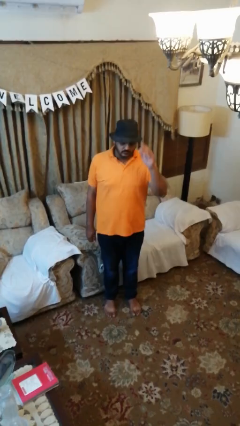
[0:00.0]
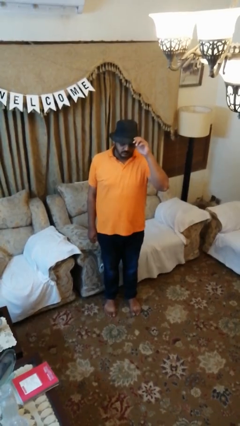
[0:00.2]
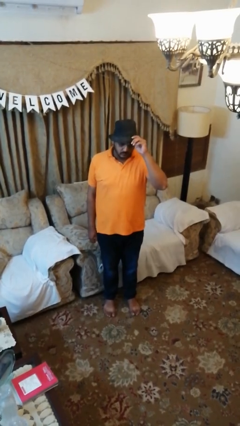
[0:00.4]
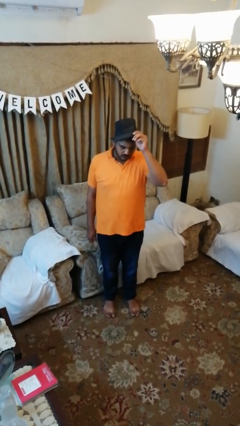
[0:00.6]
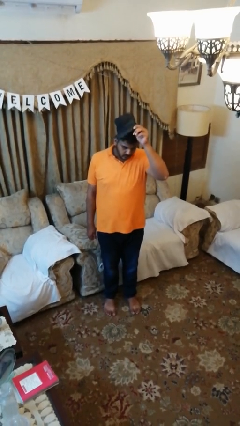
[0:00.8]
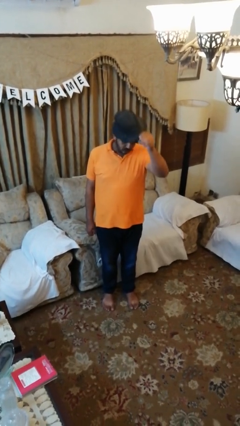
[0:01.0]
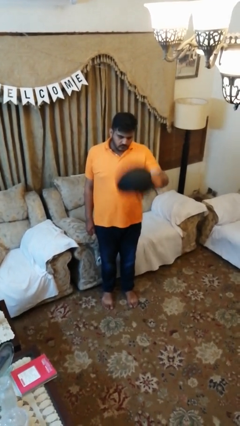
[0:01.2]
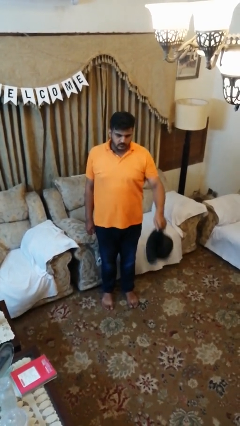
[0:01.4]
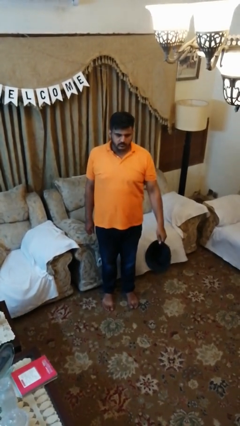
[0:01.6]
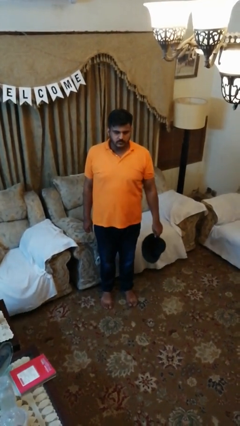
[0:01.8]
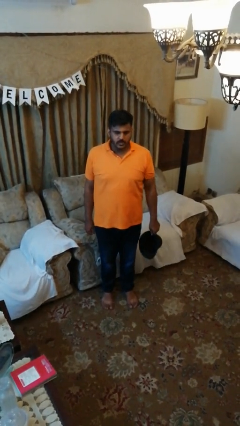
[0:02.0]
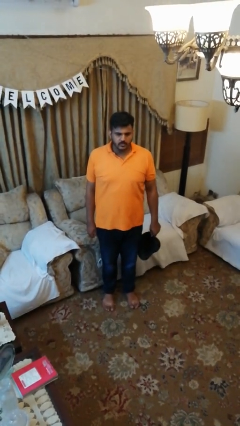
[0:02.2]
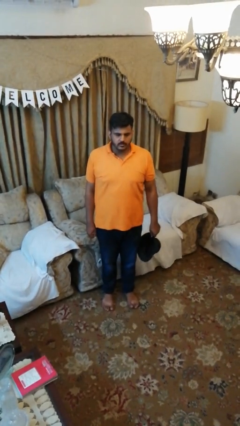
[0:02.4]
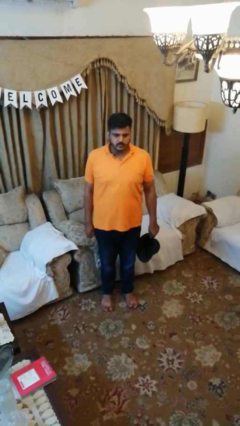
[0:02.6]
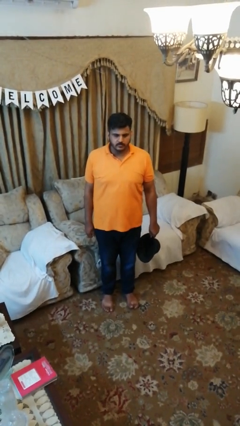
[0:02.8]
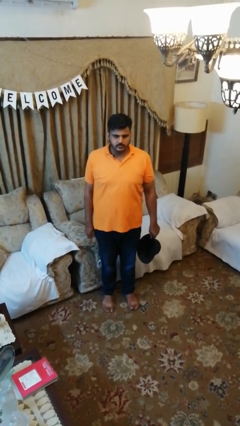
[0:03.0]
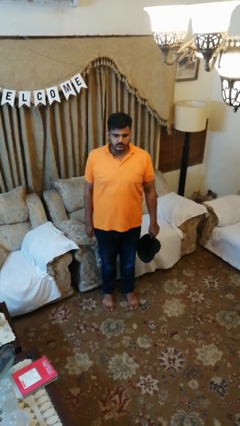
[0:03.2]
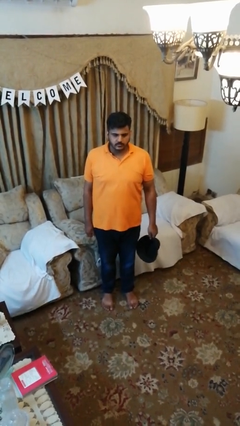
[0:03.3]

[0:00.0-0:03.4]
person takes off hat

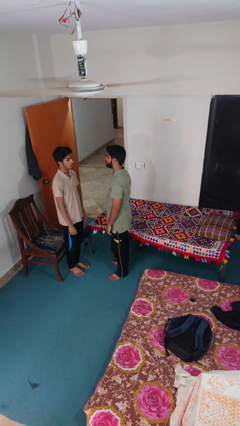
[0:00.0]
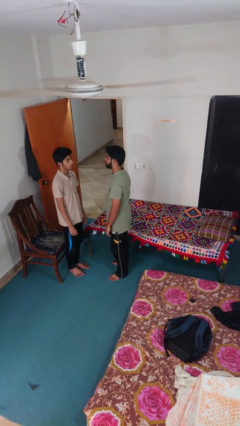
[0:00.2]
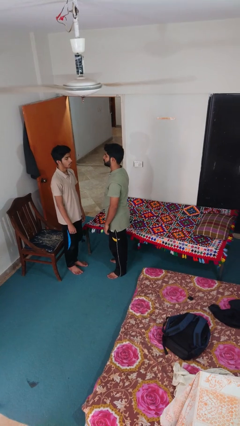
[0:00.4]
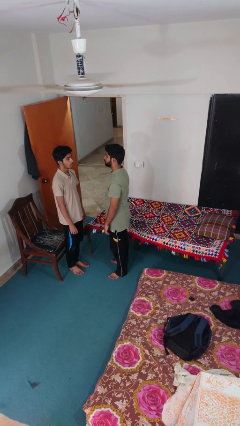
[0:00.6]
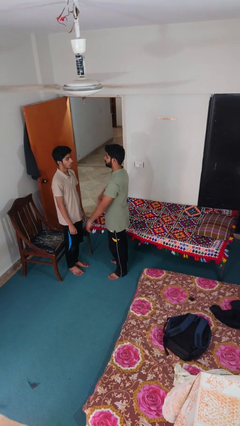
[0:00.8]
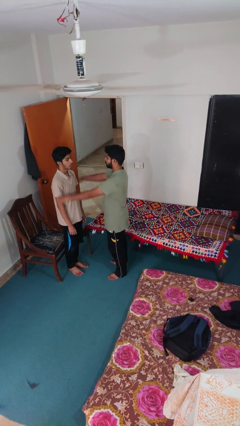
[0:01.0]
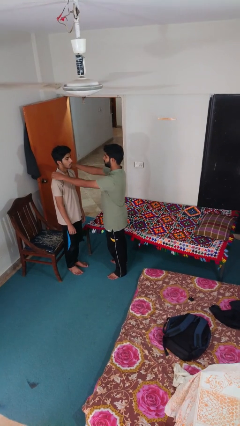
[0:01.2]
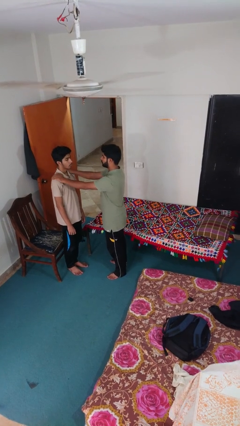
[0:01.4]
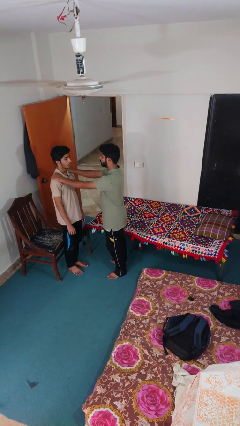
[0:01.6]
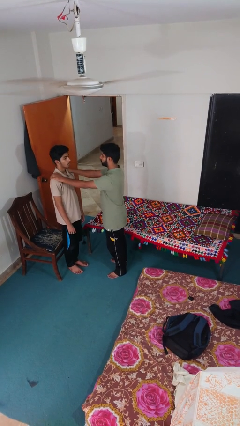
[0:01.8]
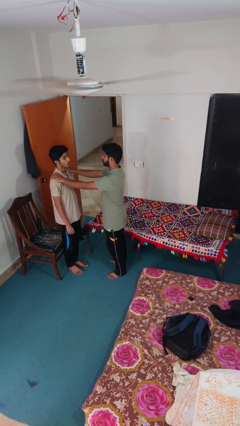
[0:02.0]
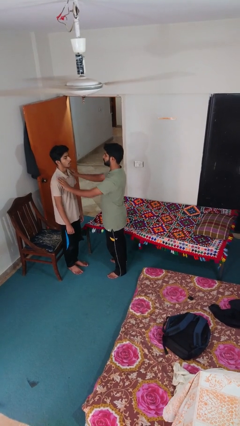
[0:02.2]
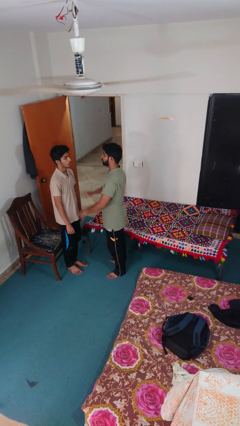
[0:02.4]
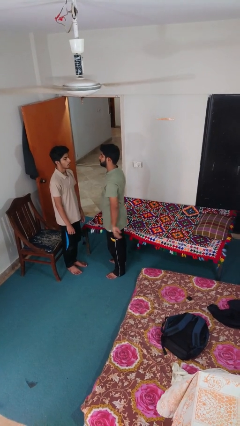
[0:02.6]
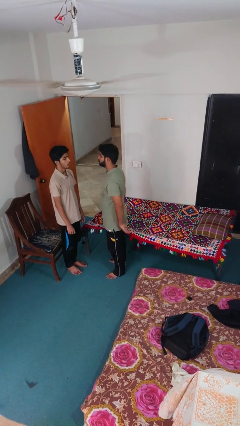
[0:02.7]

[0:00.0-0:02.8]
person pounds shoulders of person

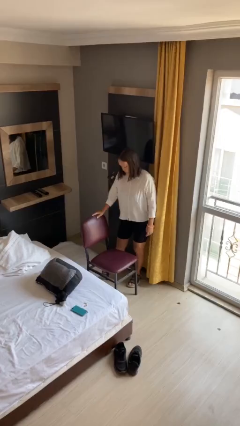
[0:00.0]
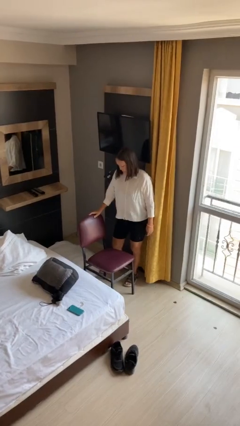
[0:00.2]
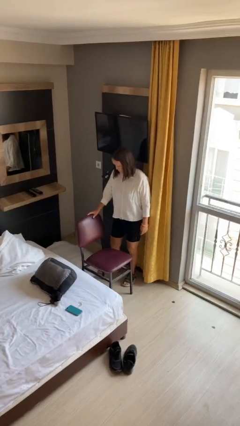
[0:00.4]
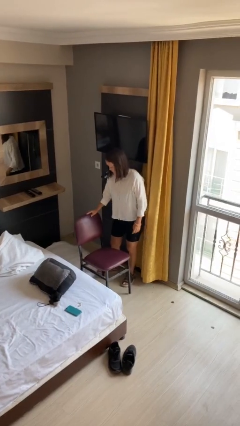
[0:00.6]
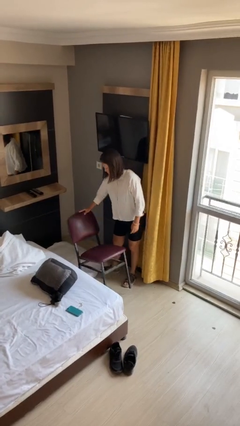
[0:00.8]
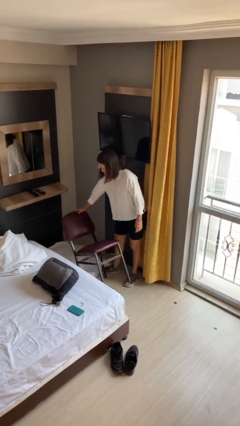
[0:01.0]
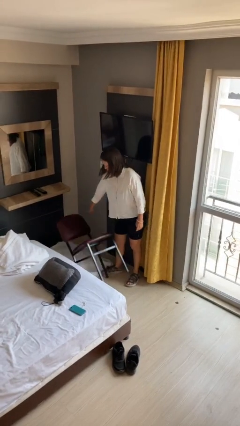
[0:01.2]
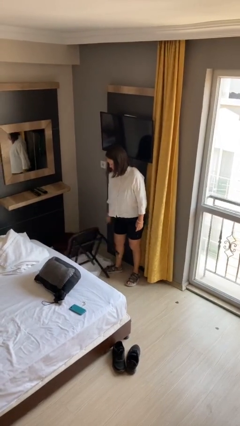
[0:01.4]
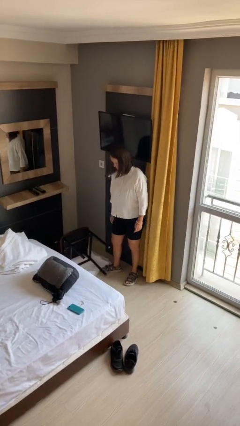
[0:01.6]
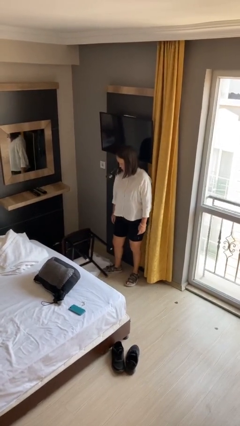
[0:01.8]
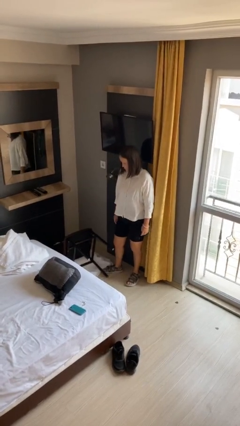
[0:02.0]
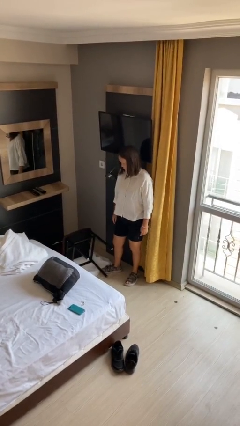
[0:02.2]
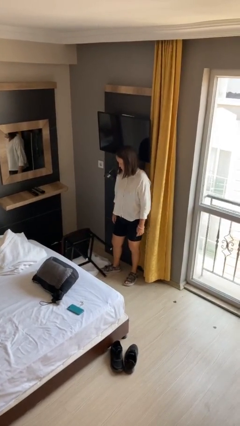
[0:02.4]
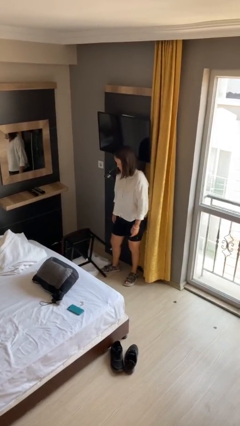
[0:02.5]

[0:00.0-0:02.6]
person knocks over furniture

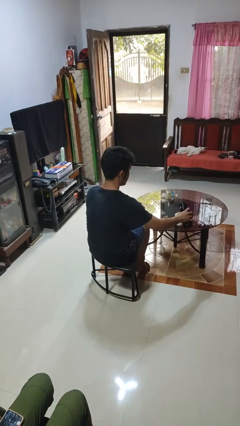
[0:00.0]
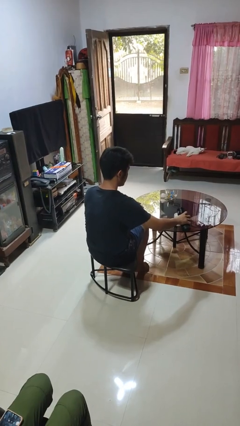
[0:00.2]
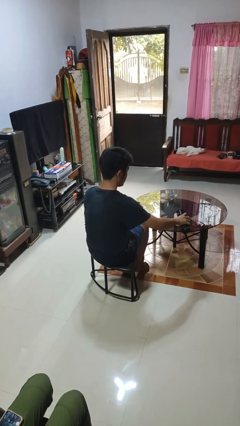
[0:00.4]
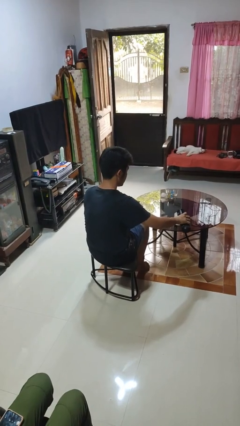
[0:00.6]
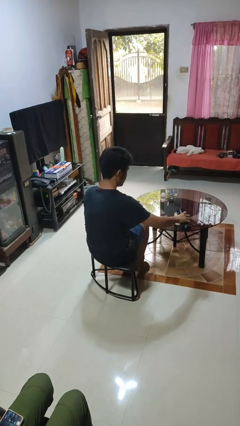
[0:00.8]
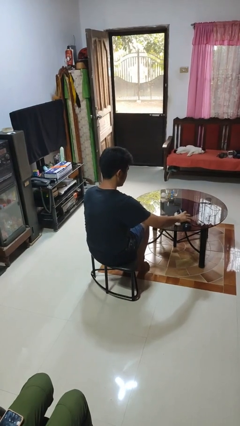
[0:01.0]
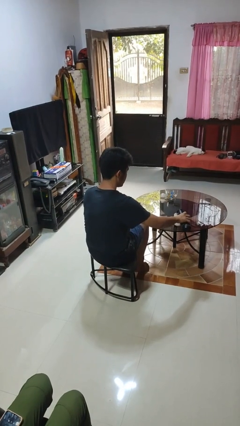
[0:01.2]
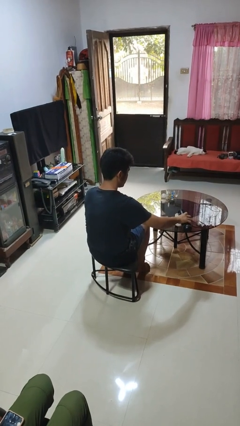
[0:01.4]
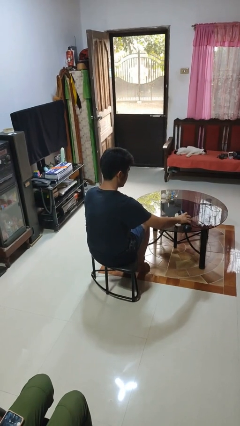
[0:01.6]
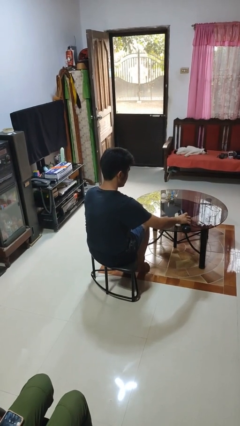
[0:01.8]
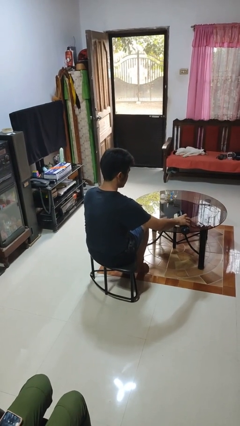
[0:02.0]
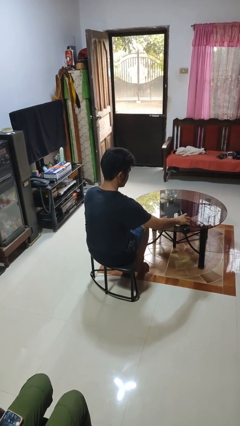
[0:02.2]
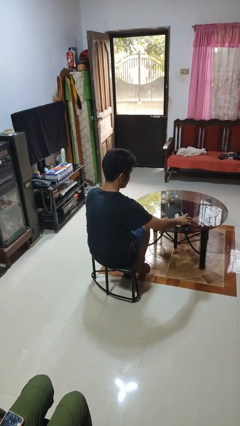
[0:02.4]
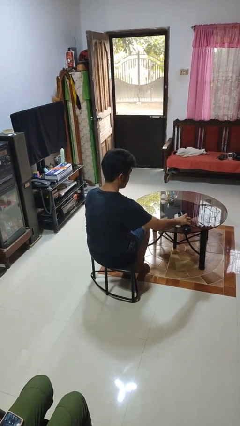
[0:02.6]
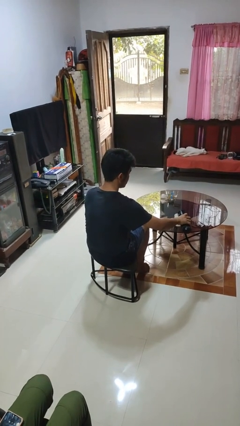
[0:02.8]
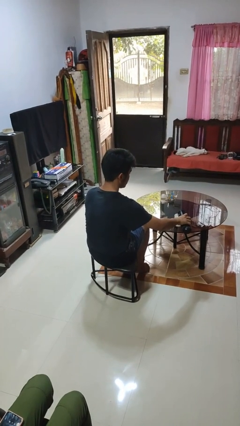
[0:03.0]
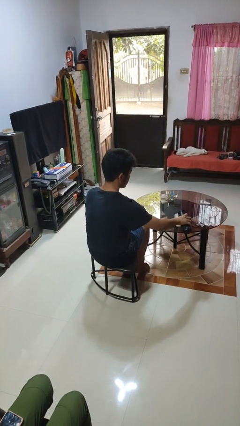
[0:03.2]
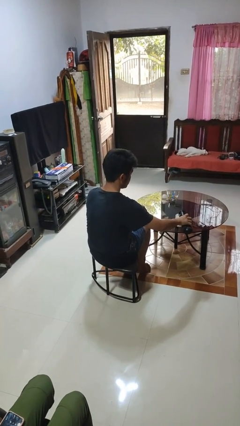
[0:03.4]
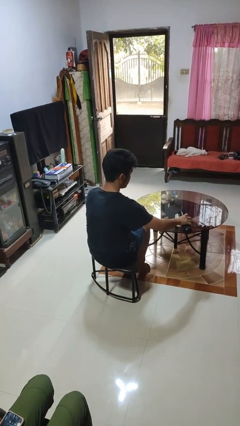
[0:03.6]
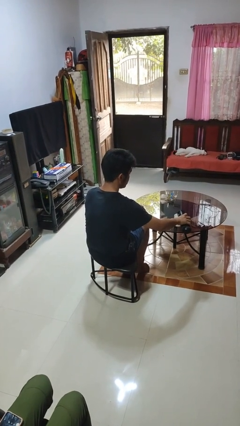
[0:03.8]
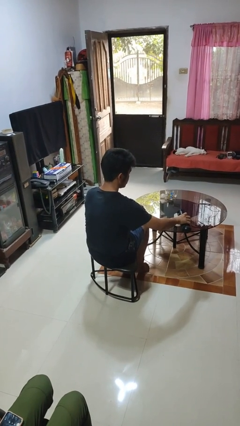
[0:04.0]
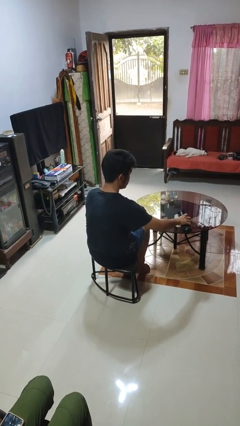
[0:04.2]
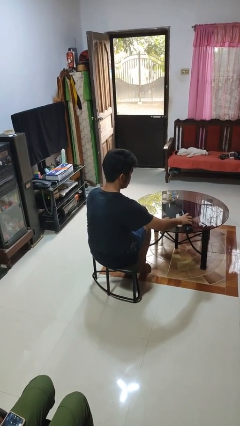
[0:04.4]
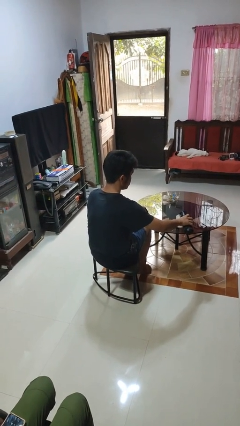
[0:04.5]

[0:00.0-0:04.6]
person pours liquid into cup

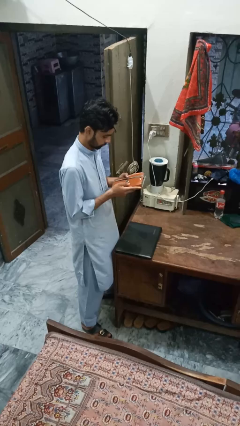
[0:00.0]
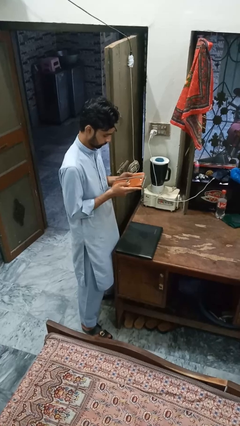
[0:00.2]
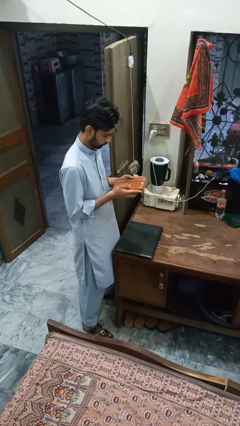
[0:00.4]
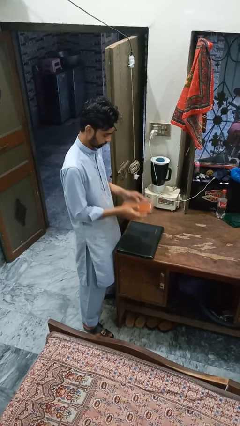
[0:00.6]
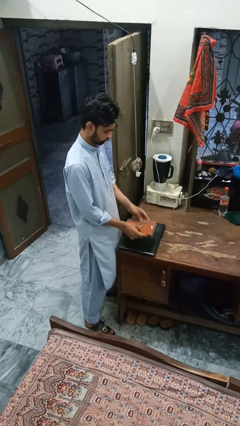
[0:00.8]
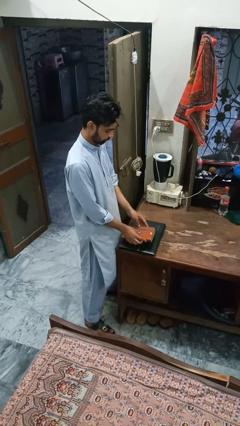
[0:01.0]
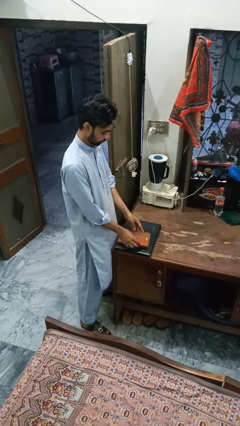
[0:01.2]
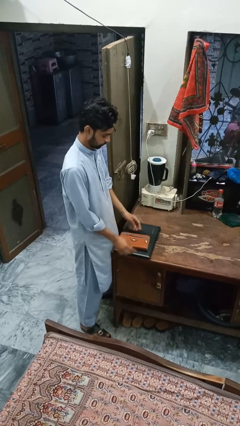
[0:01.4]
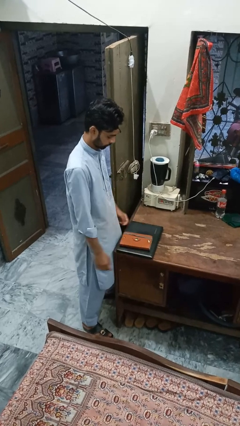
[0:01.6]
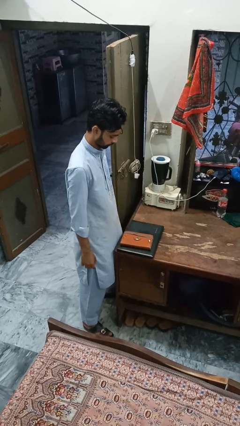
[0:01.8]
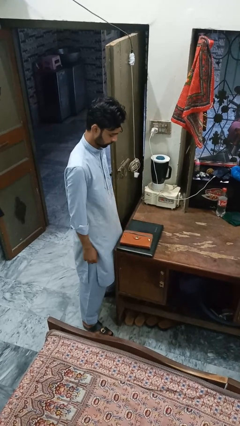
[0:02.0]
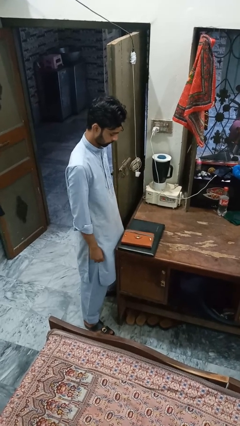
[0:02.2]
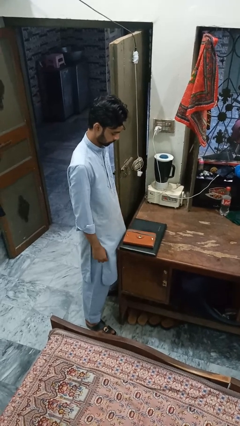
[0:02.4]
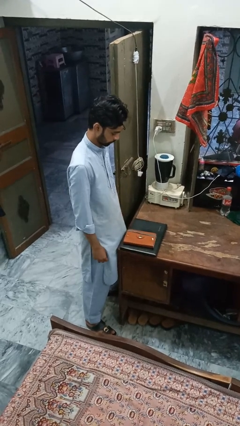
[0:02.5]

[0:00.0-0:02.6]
person puts down object on countertop

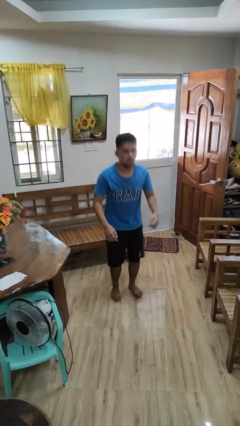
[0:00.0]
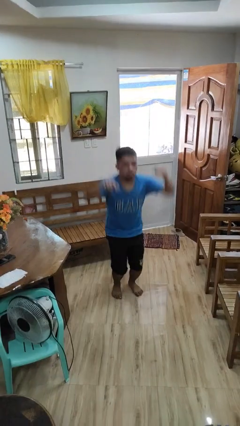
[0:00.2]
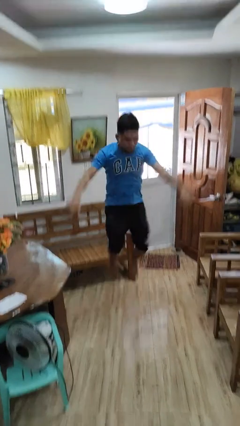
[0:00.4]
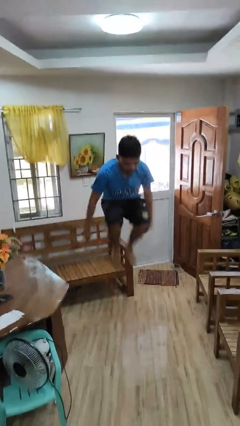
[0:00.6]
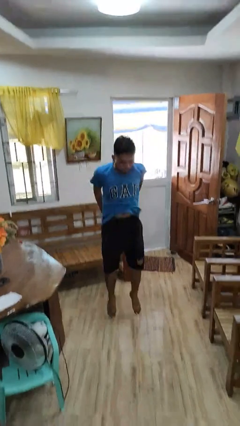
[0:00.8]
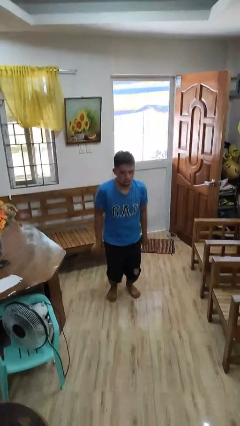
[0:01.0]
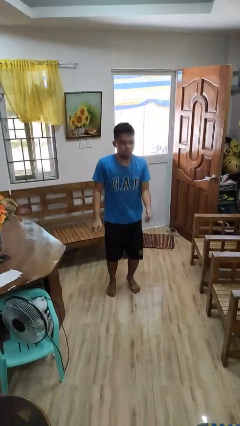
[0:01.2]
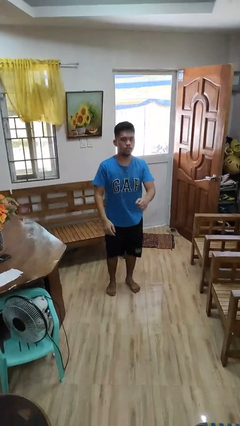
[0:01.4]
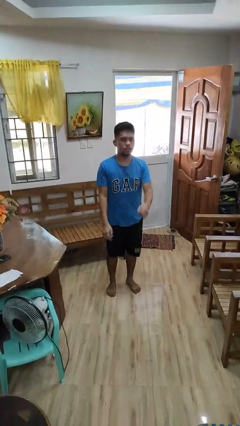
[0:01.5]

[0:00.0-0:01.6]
person jumps
